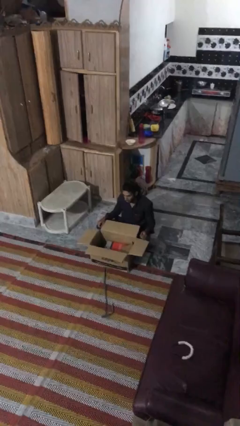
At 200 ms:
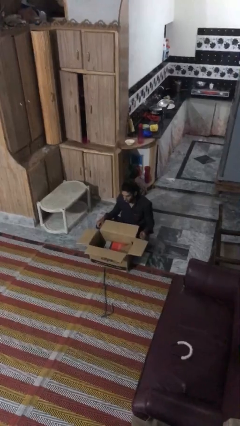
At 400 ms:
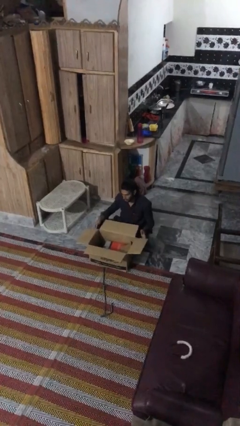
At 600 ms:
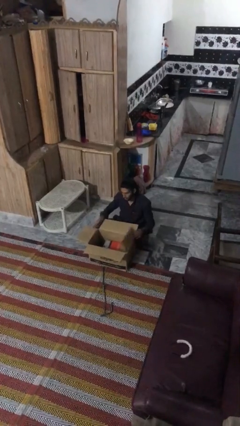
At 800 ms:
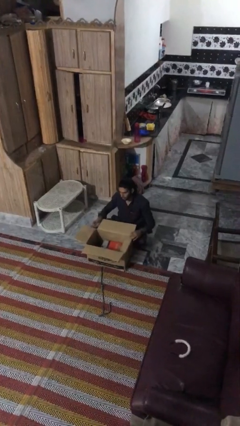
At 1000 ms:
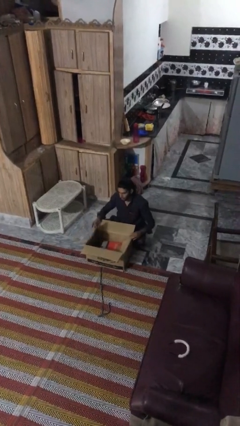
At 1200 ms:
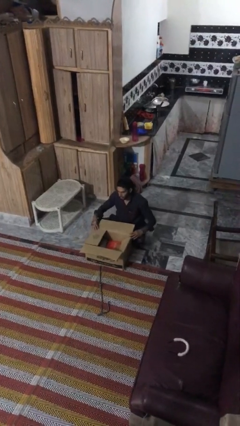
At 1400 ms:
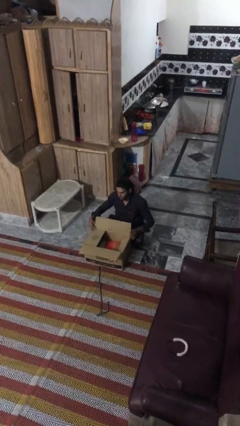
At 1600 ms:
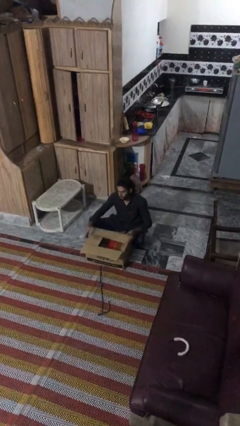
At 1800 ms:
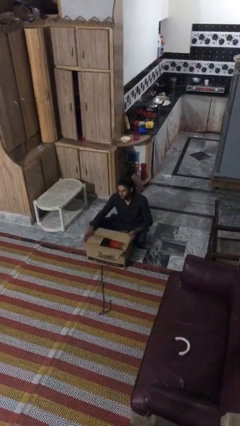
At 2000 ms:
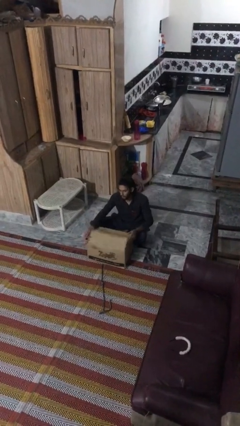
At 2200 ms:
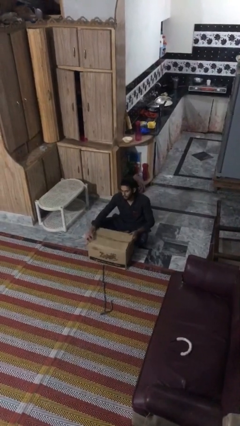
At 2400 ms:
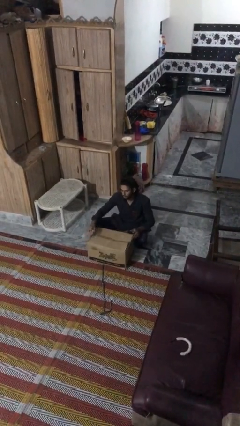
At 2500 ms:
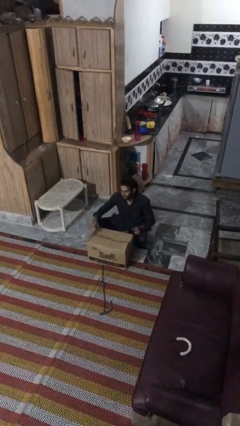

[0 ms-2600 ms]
person closes box

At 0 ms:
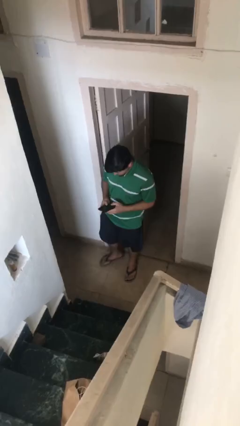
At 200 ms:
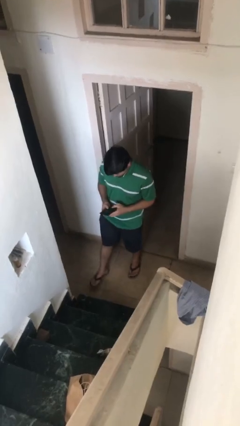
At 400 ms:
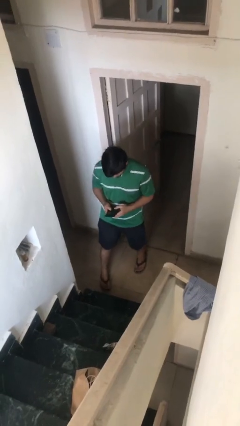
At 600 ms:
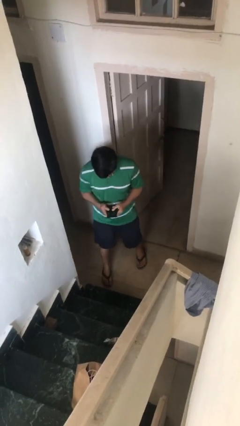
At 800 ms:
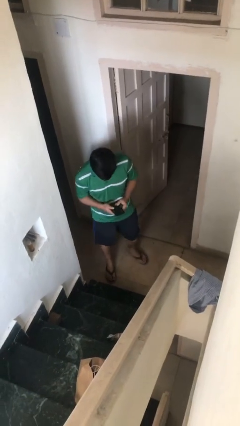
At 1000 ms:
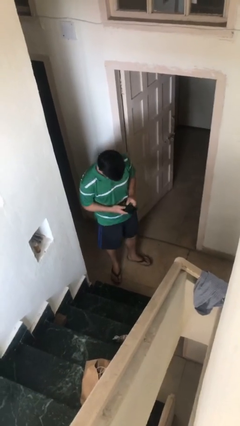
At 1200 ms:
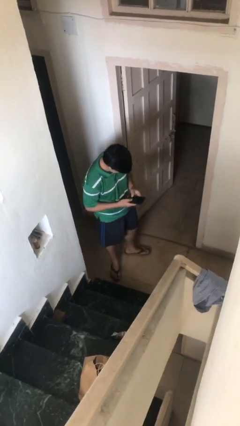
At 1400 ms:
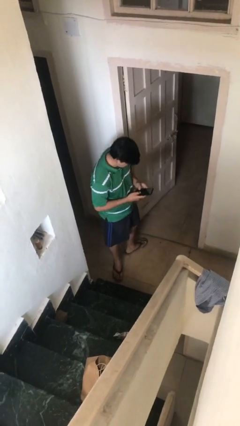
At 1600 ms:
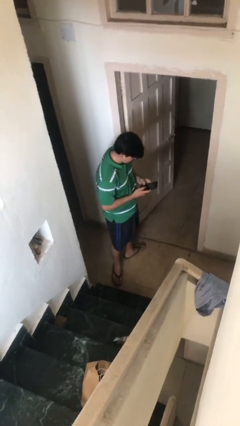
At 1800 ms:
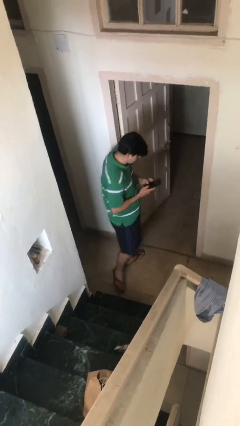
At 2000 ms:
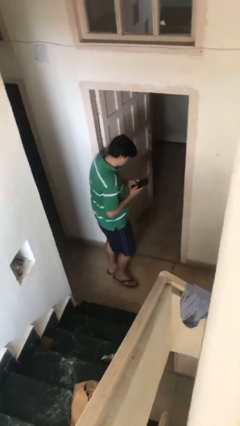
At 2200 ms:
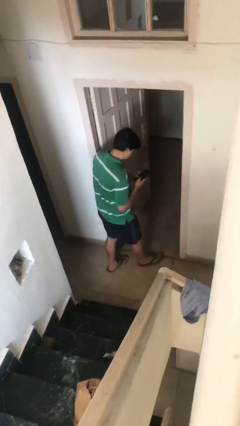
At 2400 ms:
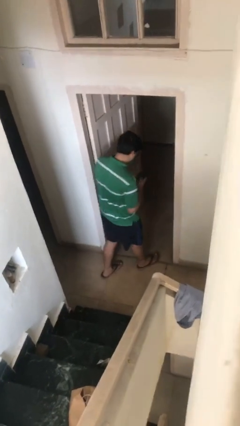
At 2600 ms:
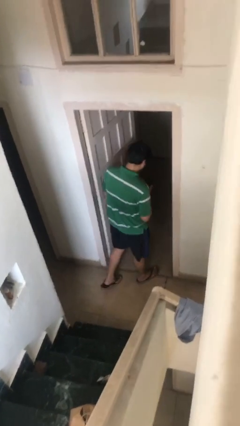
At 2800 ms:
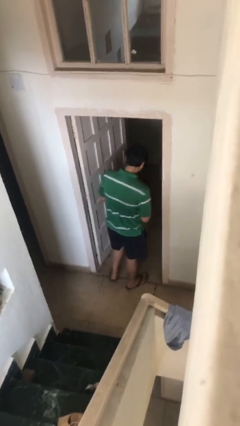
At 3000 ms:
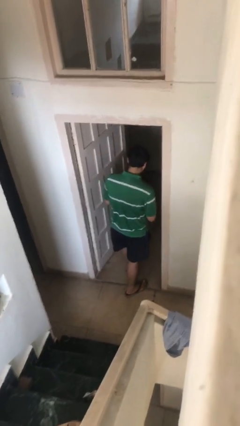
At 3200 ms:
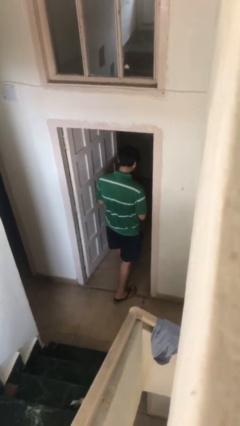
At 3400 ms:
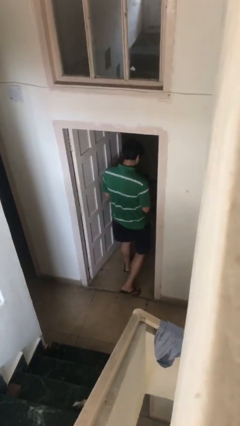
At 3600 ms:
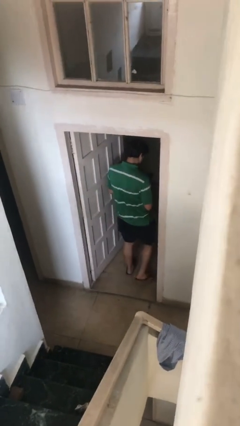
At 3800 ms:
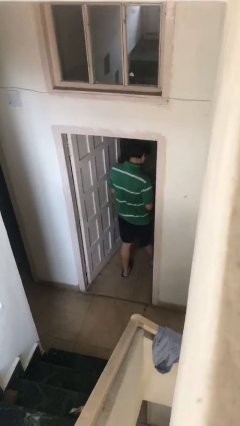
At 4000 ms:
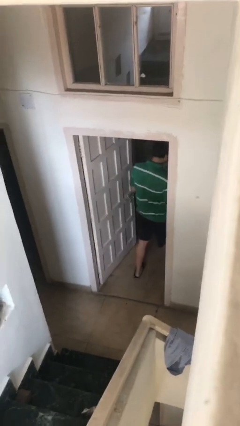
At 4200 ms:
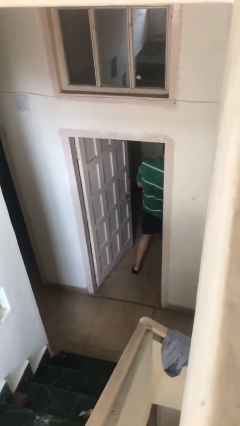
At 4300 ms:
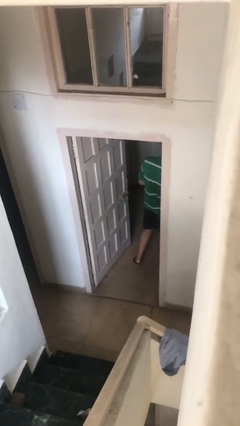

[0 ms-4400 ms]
person exits scene through structure

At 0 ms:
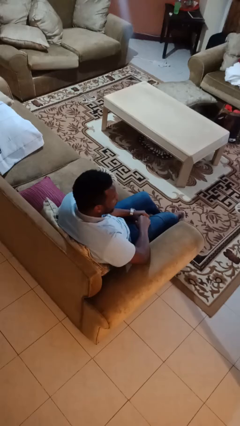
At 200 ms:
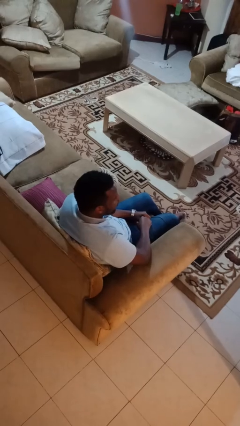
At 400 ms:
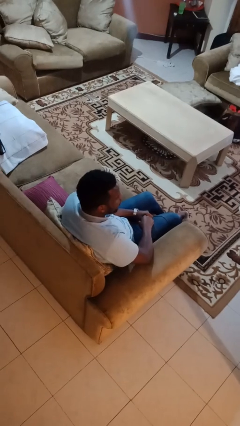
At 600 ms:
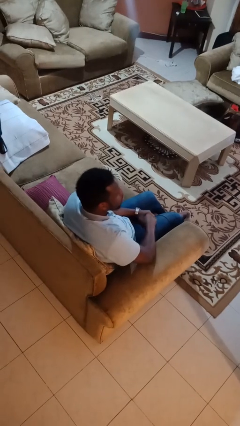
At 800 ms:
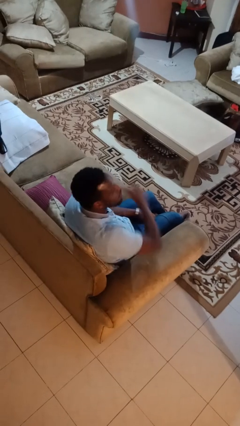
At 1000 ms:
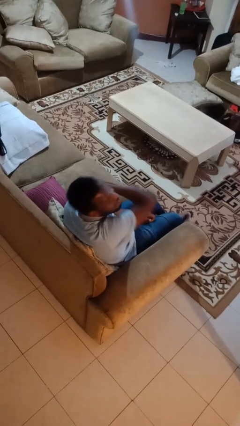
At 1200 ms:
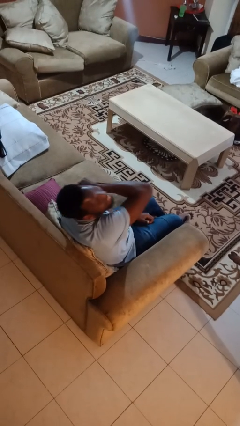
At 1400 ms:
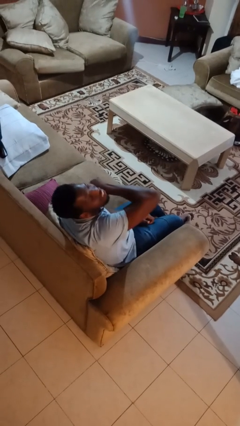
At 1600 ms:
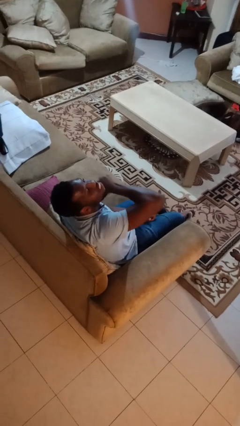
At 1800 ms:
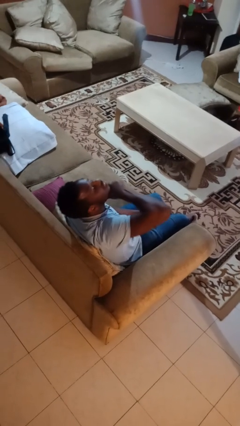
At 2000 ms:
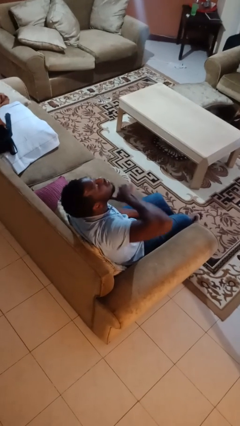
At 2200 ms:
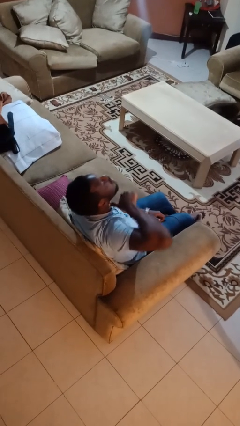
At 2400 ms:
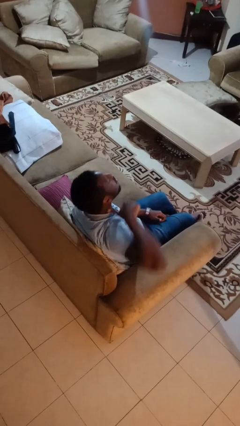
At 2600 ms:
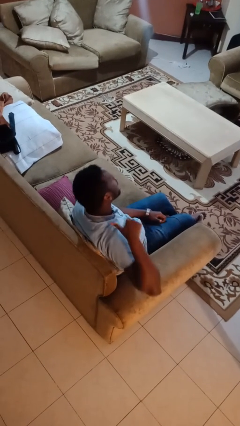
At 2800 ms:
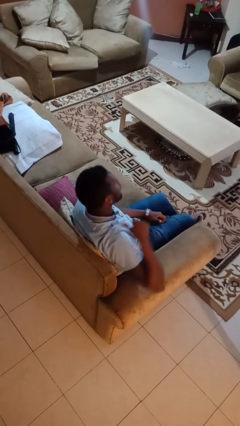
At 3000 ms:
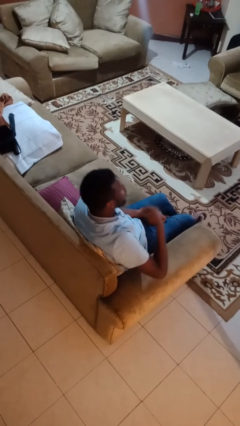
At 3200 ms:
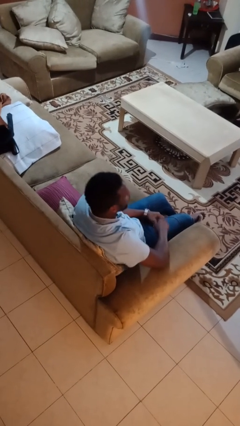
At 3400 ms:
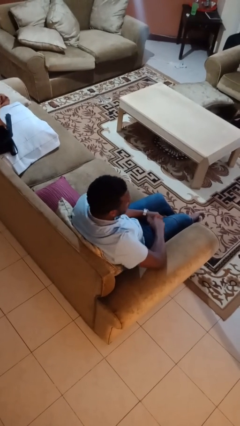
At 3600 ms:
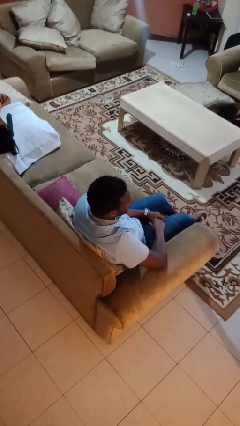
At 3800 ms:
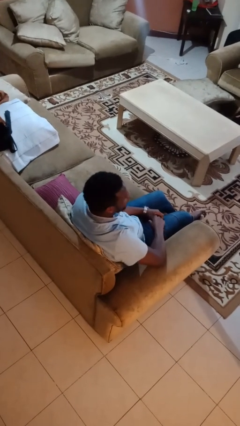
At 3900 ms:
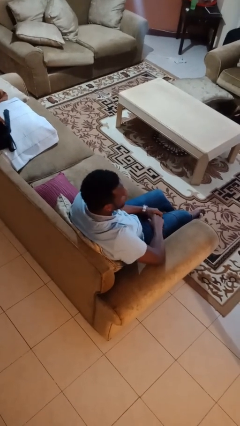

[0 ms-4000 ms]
person gestures cut

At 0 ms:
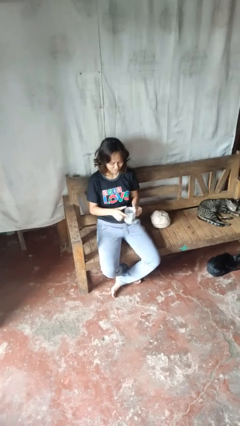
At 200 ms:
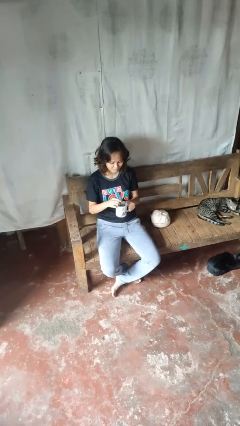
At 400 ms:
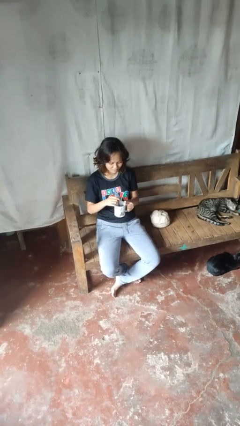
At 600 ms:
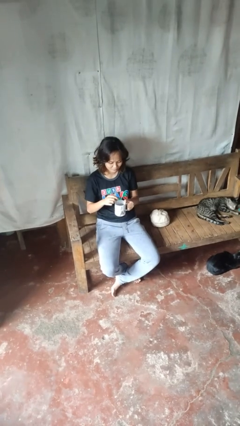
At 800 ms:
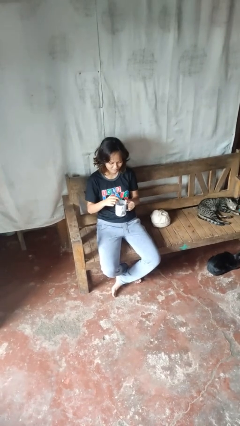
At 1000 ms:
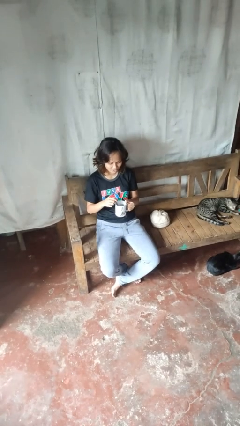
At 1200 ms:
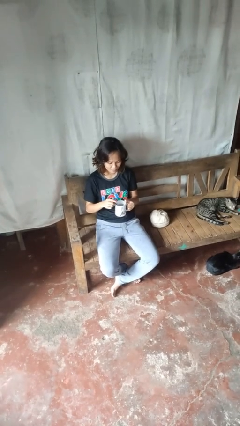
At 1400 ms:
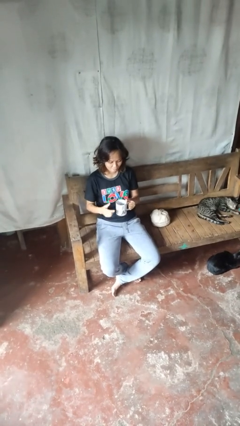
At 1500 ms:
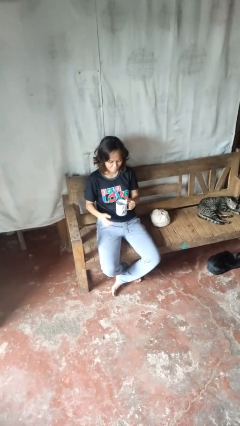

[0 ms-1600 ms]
person stirs mug

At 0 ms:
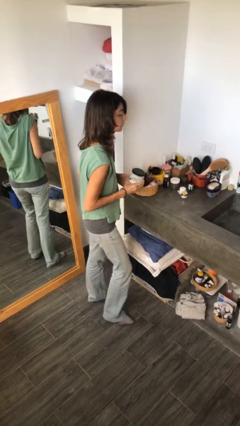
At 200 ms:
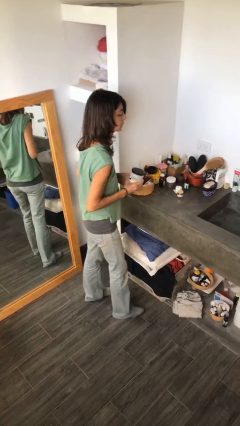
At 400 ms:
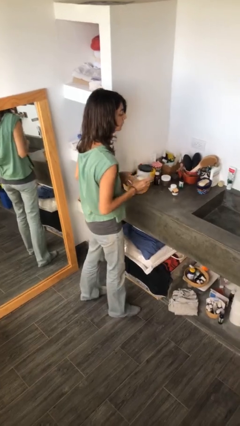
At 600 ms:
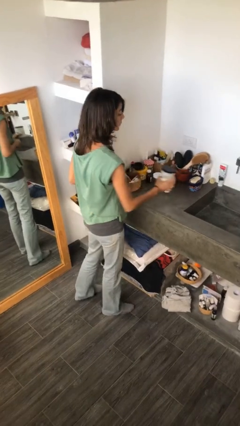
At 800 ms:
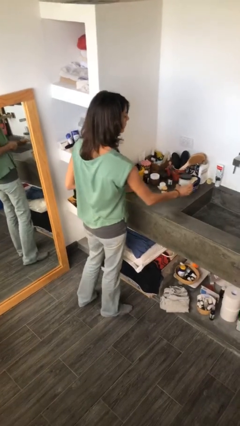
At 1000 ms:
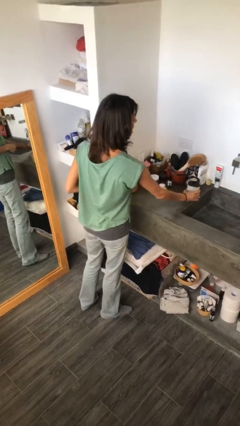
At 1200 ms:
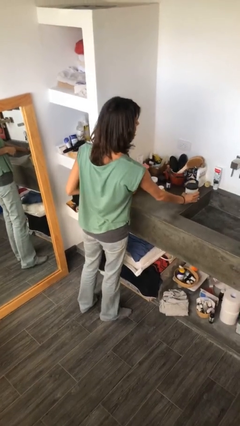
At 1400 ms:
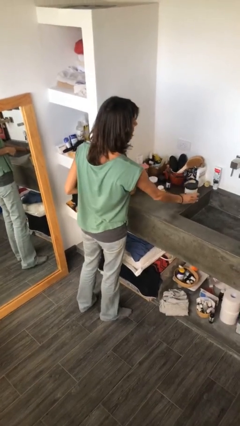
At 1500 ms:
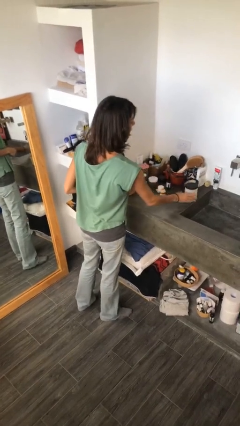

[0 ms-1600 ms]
person puts down object on countertop

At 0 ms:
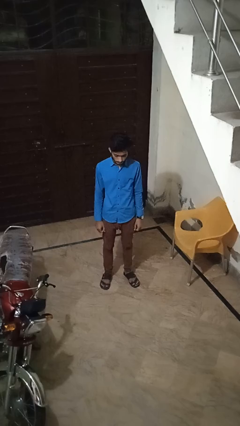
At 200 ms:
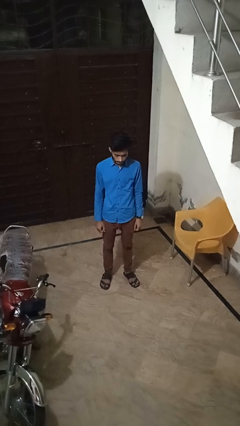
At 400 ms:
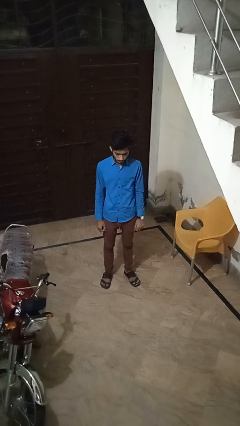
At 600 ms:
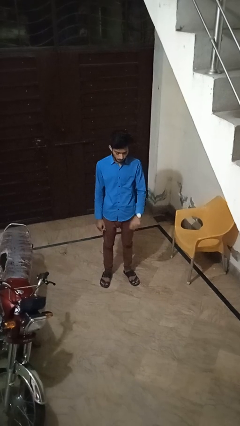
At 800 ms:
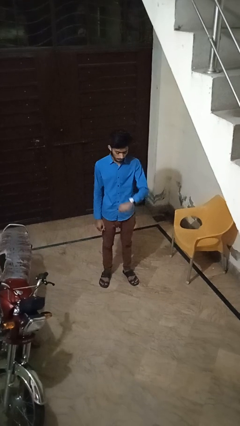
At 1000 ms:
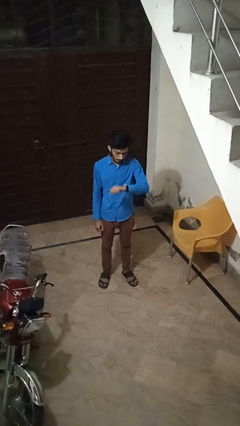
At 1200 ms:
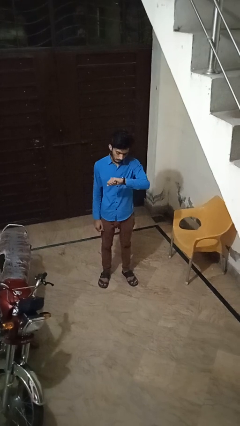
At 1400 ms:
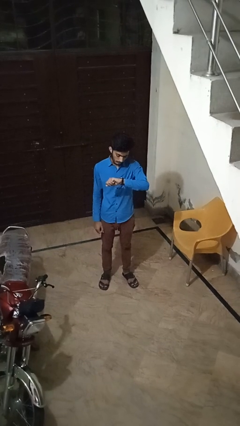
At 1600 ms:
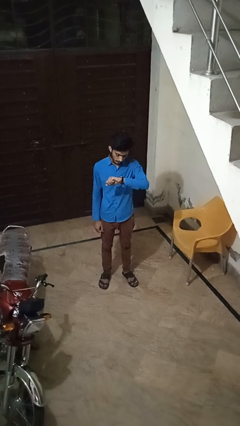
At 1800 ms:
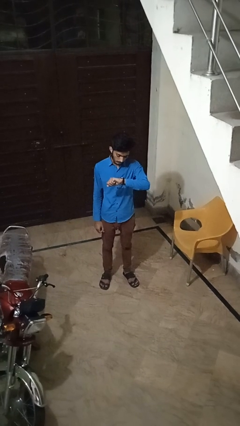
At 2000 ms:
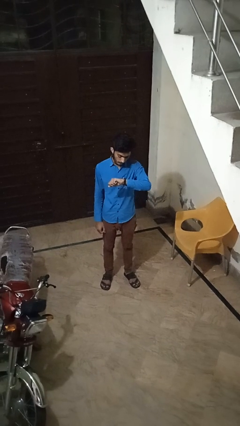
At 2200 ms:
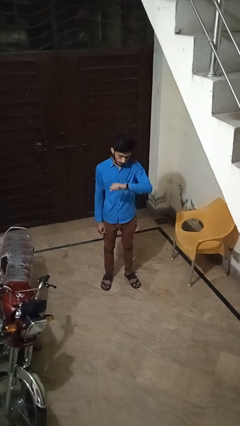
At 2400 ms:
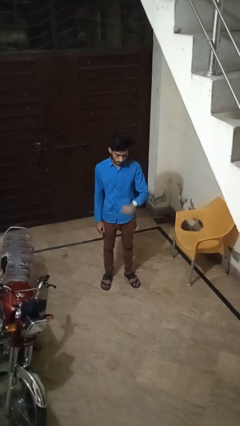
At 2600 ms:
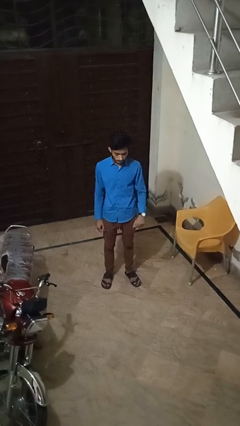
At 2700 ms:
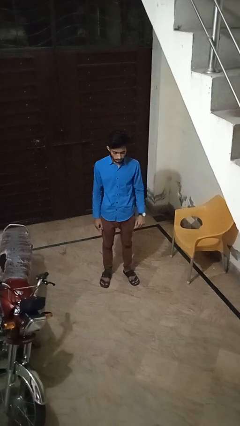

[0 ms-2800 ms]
person looks at wristwatch

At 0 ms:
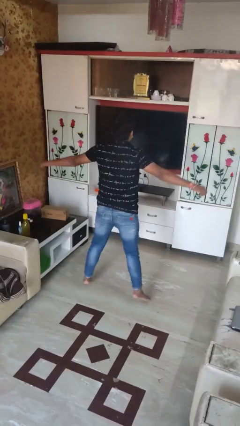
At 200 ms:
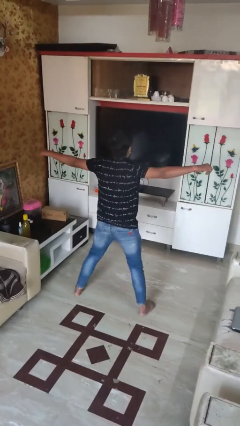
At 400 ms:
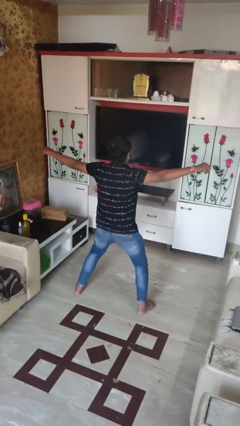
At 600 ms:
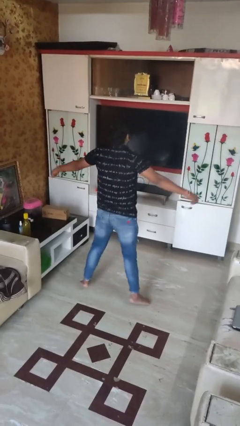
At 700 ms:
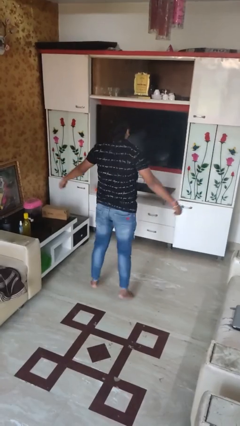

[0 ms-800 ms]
person exercises with jumping jacks
